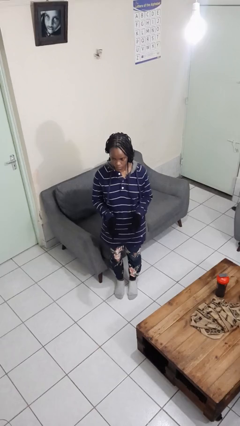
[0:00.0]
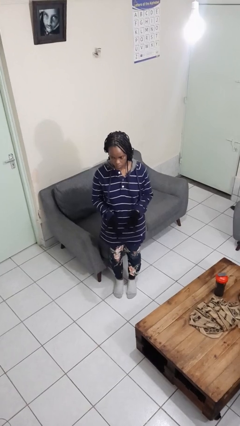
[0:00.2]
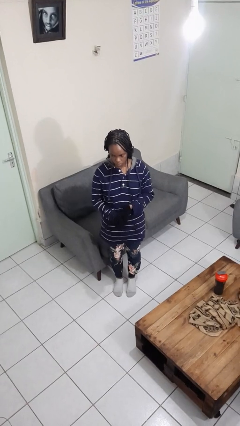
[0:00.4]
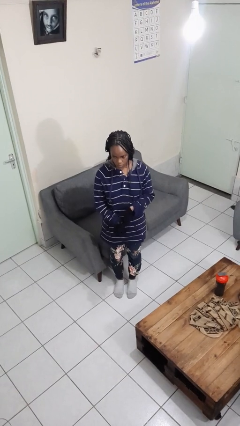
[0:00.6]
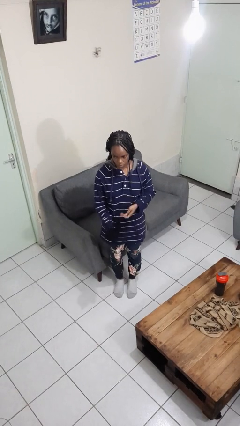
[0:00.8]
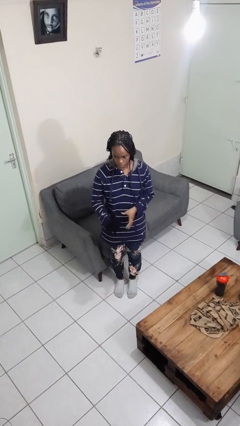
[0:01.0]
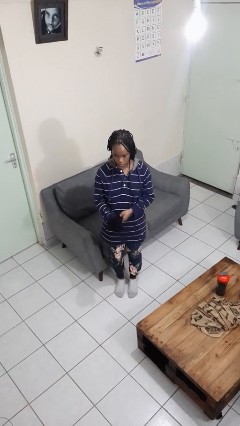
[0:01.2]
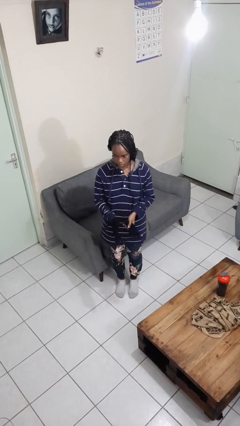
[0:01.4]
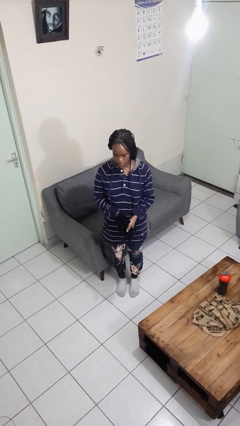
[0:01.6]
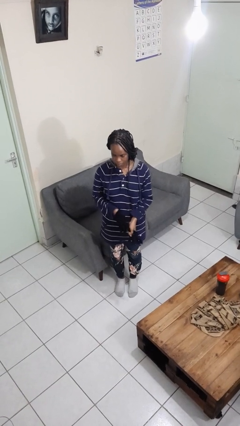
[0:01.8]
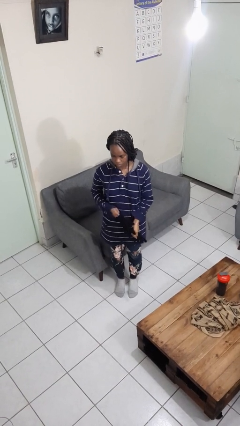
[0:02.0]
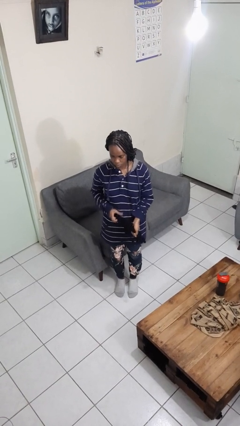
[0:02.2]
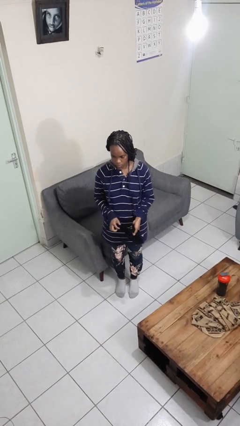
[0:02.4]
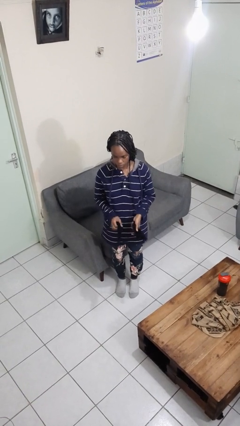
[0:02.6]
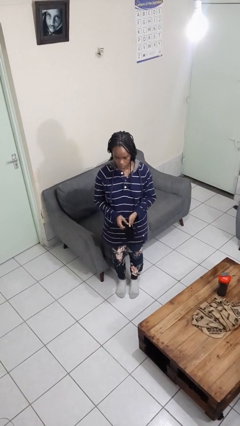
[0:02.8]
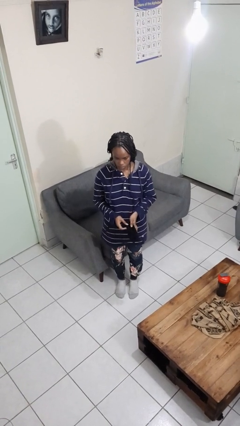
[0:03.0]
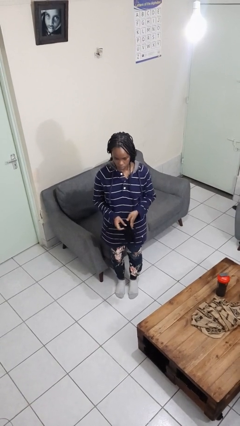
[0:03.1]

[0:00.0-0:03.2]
person takes off gloves

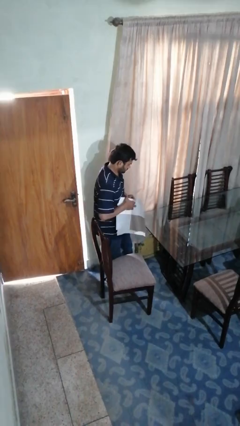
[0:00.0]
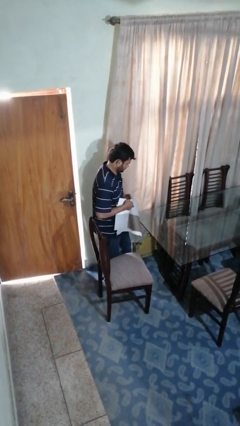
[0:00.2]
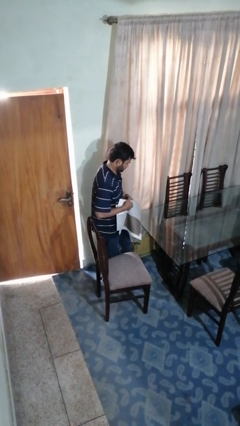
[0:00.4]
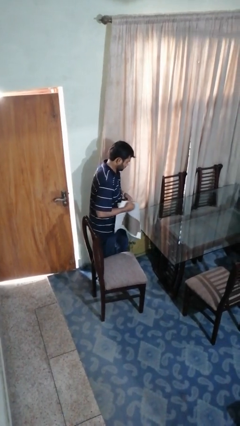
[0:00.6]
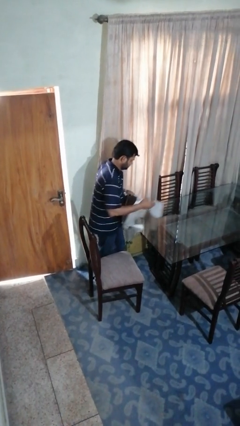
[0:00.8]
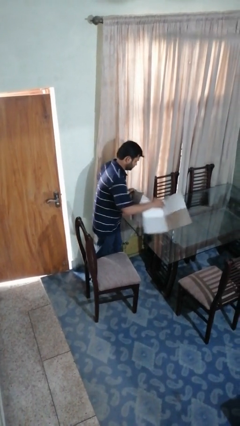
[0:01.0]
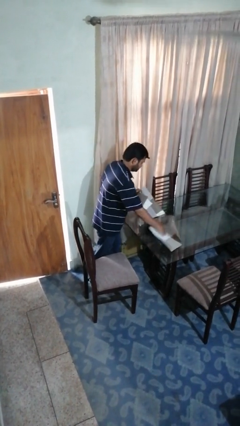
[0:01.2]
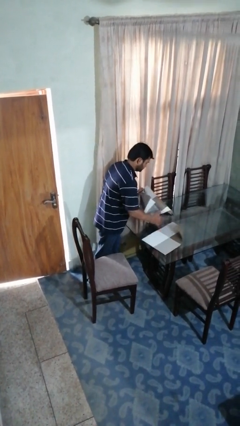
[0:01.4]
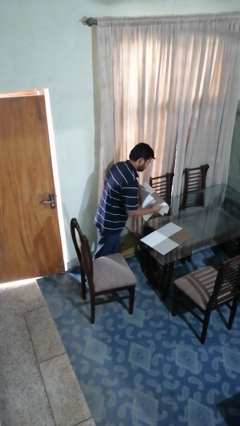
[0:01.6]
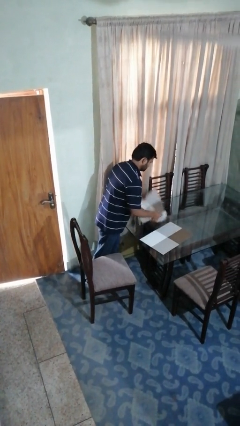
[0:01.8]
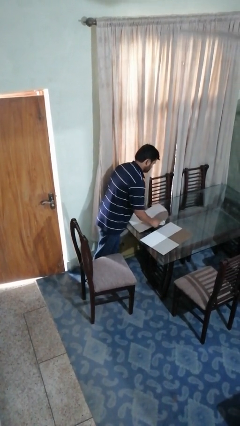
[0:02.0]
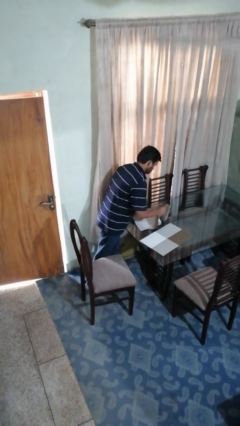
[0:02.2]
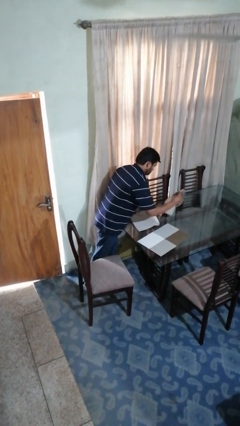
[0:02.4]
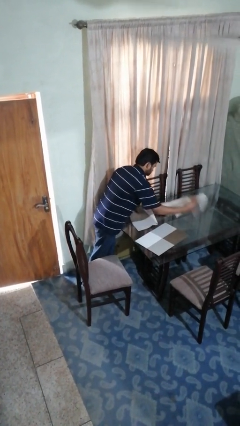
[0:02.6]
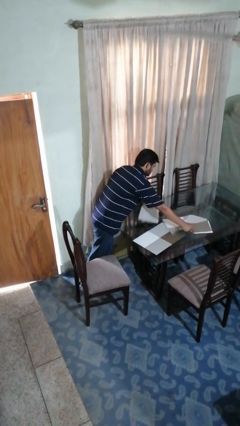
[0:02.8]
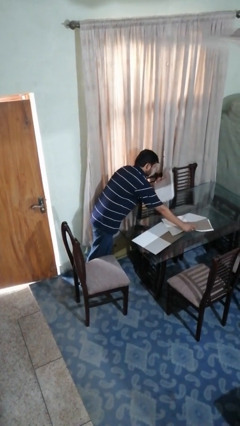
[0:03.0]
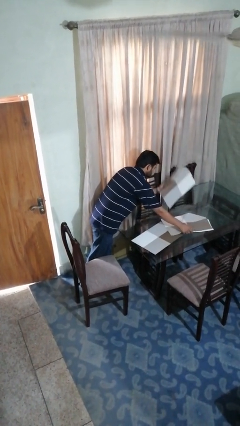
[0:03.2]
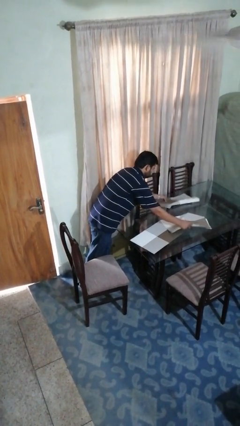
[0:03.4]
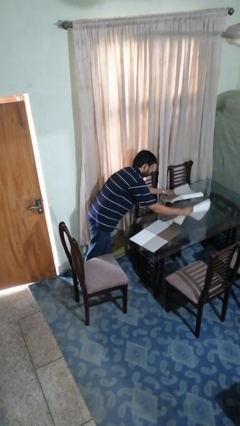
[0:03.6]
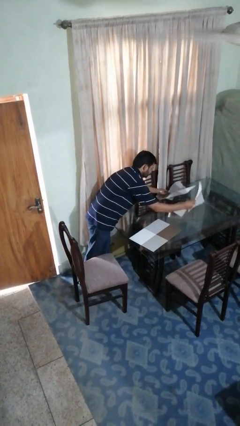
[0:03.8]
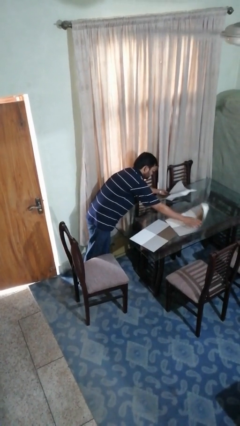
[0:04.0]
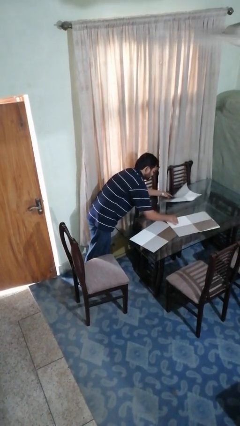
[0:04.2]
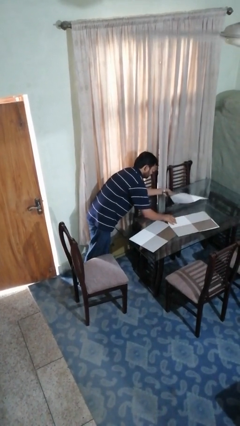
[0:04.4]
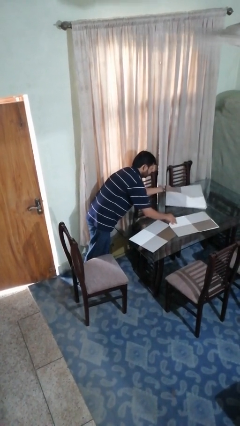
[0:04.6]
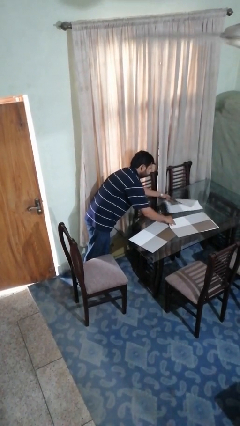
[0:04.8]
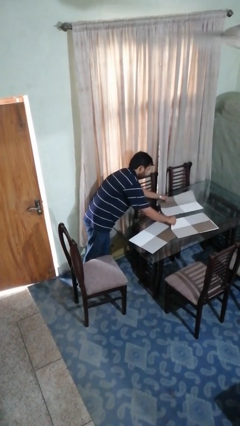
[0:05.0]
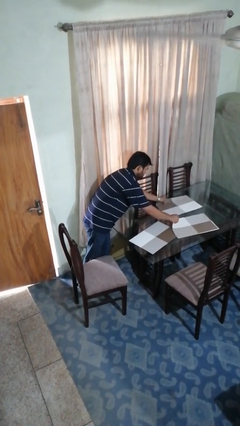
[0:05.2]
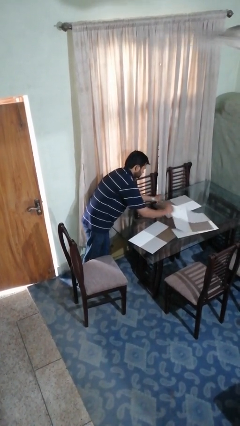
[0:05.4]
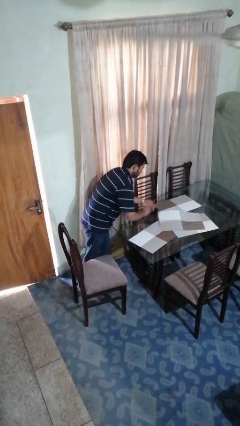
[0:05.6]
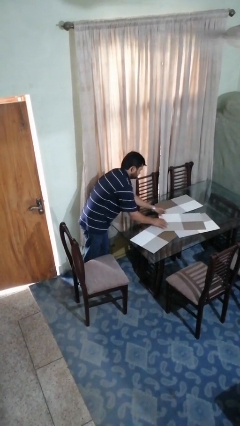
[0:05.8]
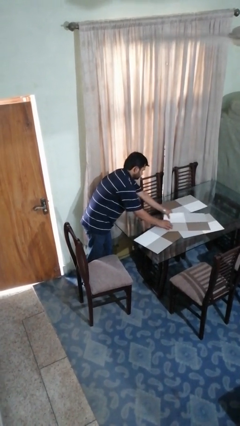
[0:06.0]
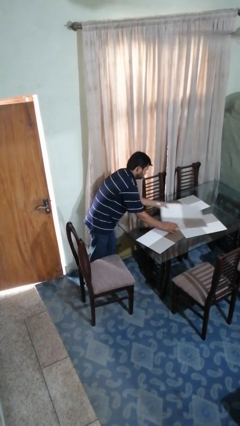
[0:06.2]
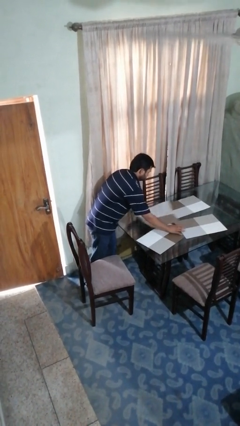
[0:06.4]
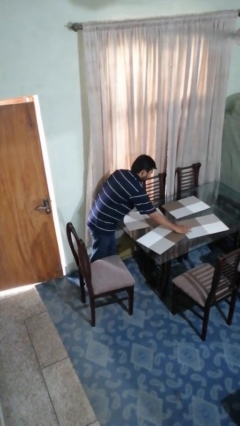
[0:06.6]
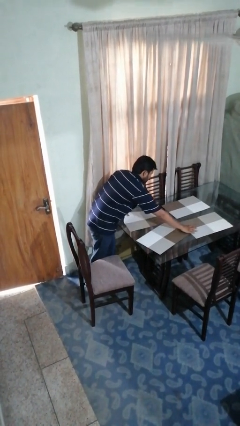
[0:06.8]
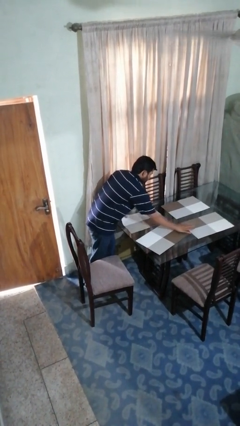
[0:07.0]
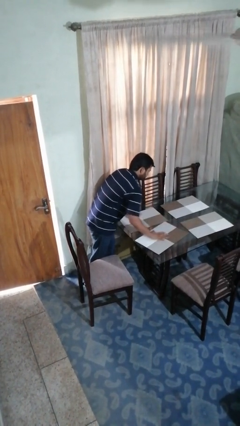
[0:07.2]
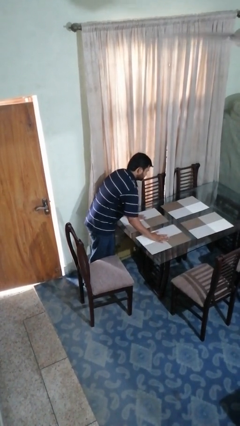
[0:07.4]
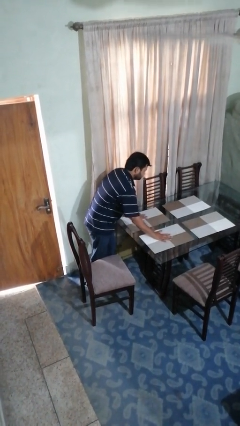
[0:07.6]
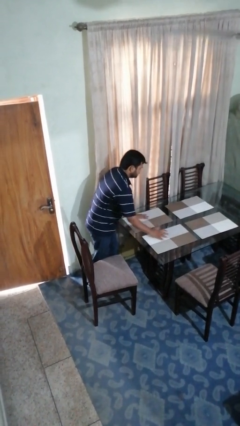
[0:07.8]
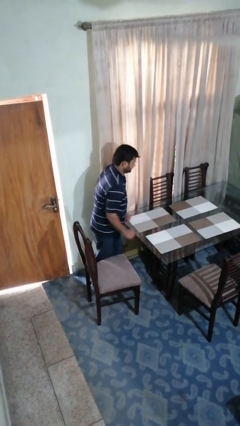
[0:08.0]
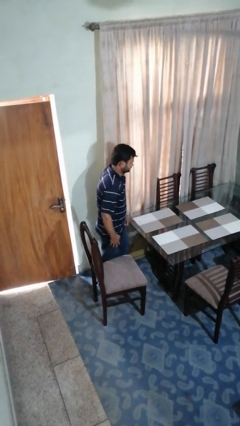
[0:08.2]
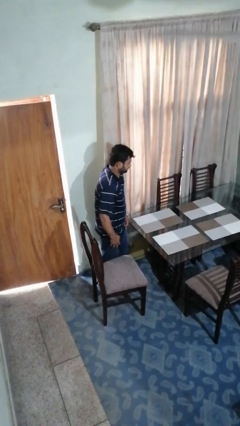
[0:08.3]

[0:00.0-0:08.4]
person spreads tablecloth

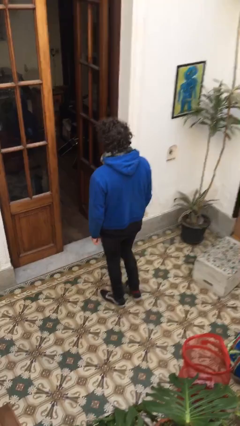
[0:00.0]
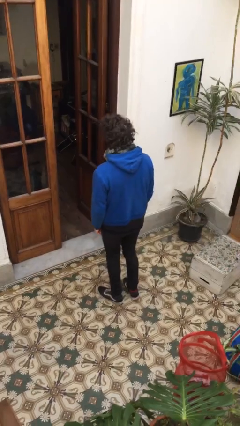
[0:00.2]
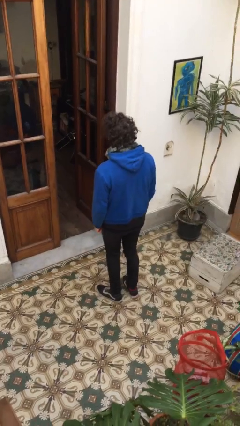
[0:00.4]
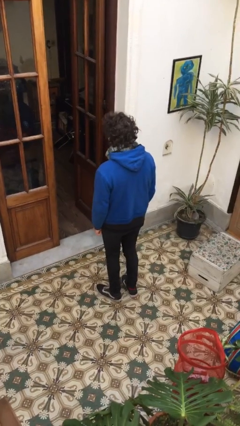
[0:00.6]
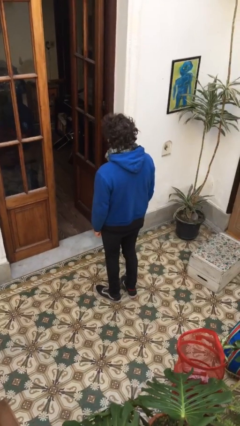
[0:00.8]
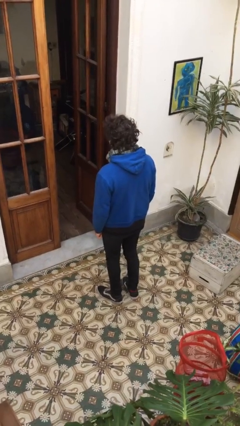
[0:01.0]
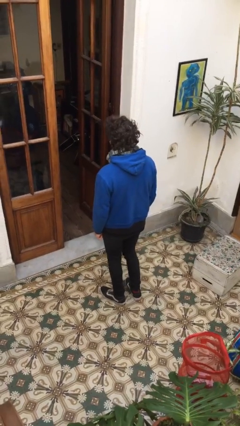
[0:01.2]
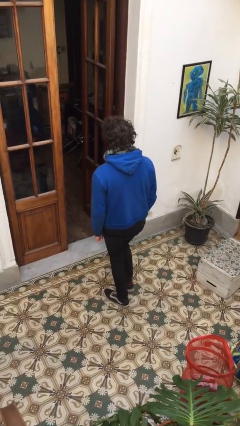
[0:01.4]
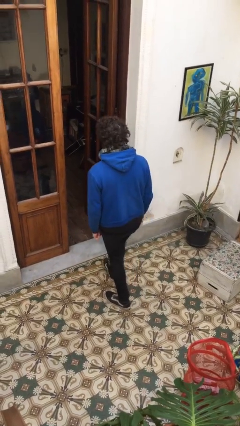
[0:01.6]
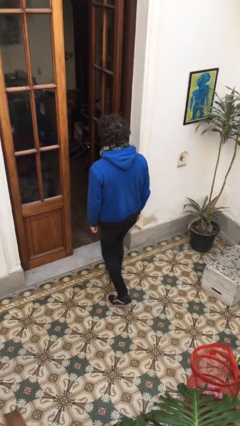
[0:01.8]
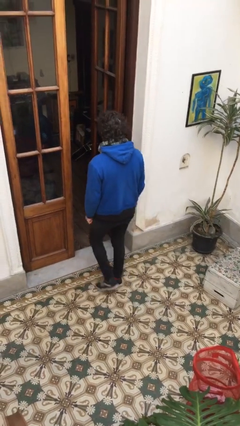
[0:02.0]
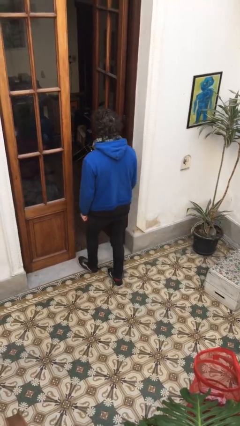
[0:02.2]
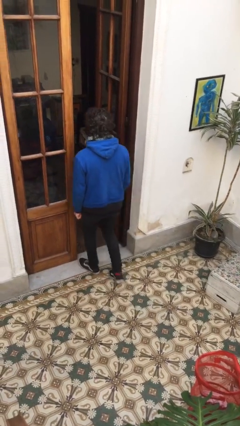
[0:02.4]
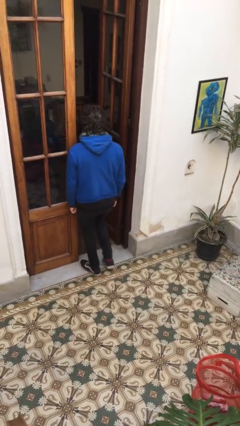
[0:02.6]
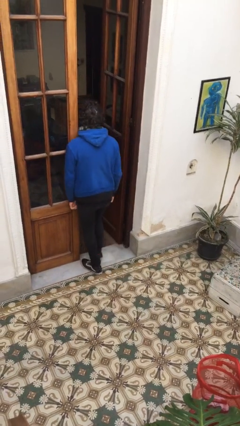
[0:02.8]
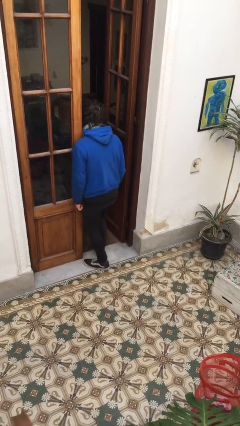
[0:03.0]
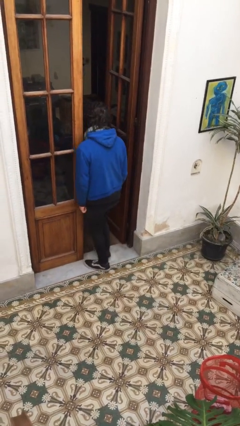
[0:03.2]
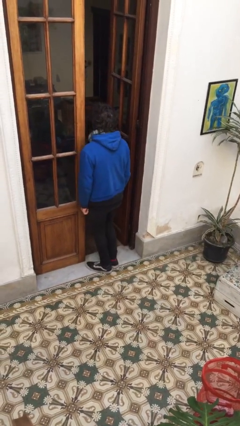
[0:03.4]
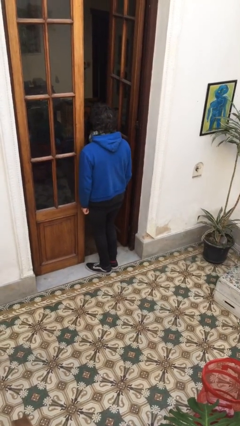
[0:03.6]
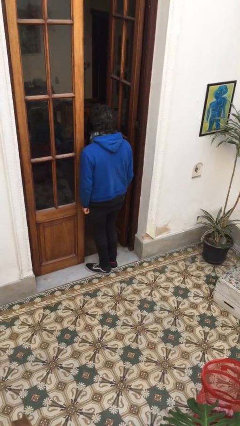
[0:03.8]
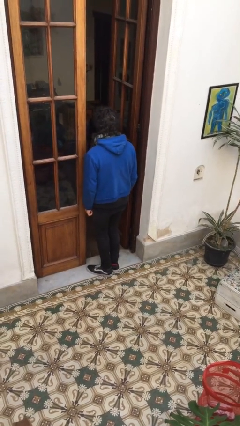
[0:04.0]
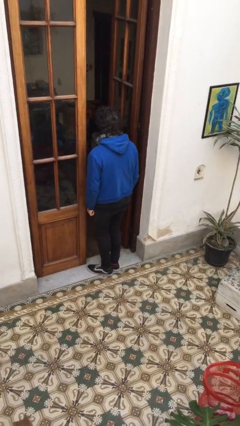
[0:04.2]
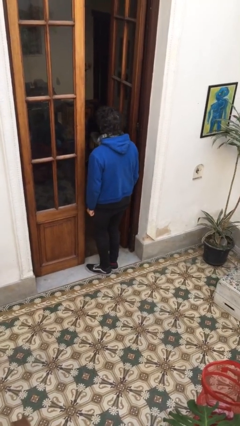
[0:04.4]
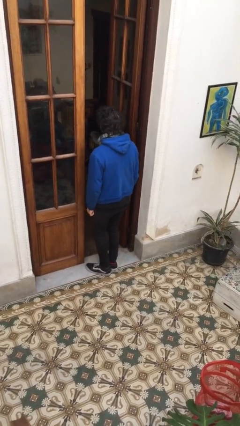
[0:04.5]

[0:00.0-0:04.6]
person bumps into wall

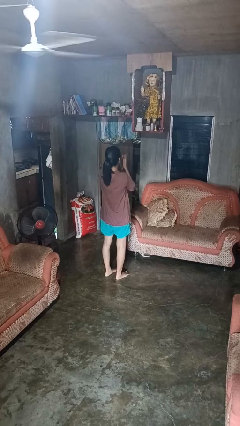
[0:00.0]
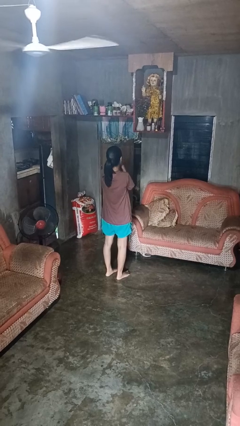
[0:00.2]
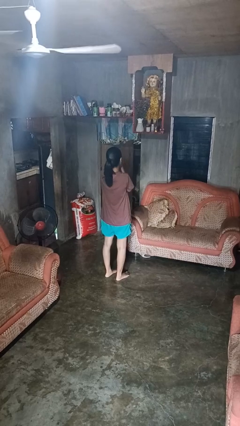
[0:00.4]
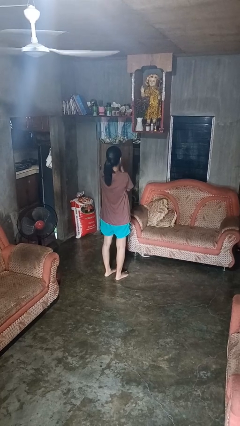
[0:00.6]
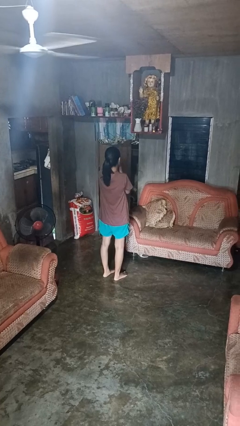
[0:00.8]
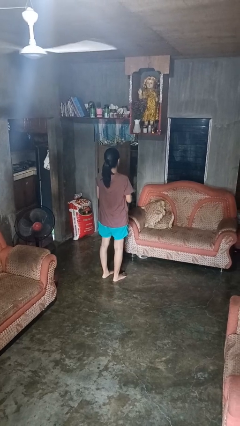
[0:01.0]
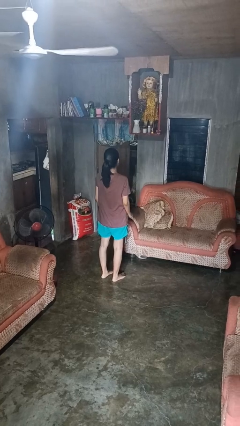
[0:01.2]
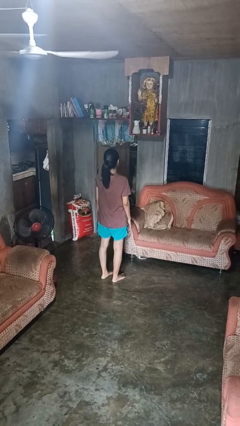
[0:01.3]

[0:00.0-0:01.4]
person prays

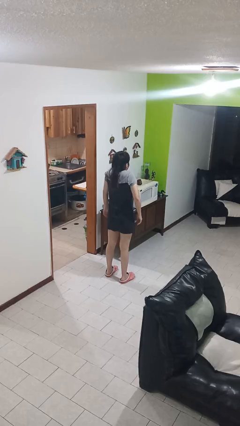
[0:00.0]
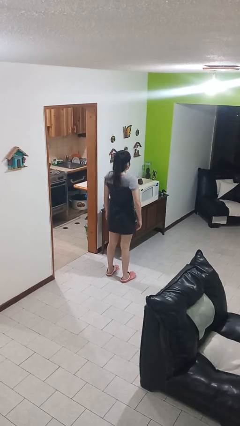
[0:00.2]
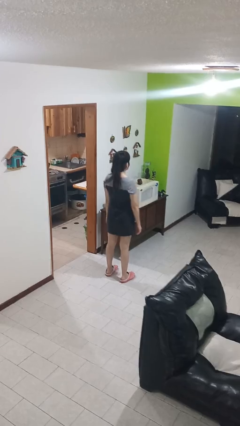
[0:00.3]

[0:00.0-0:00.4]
person shrugs
